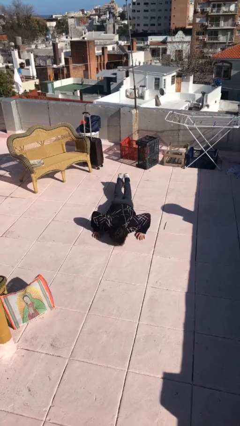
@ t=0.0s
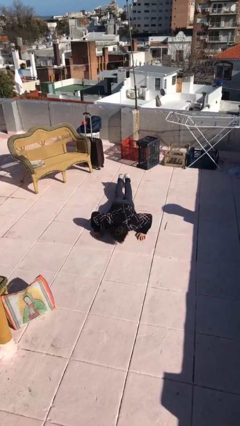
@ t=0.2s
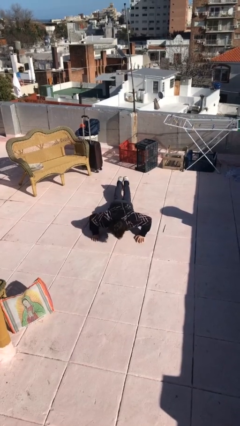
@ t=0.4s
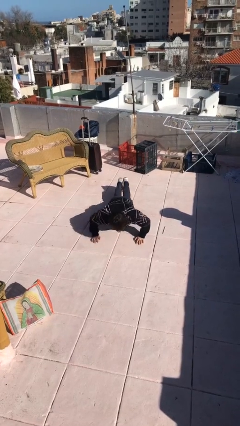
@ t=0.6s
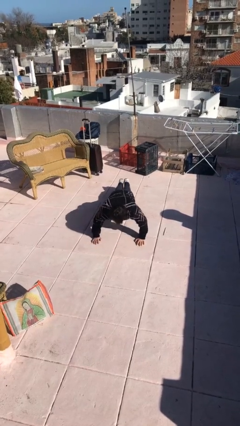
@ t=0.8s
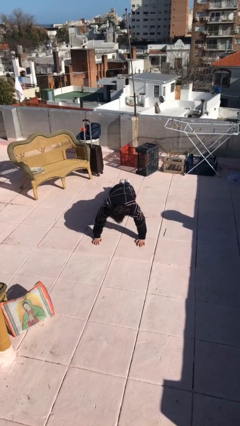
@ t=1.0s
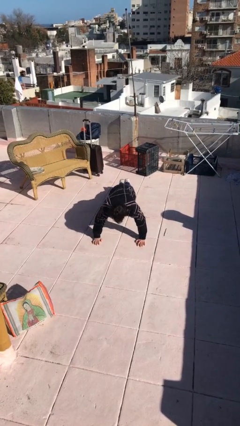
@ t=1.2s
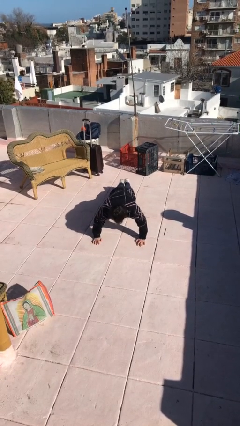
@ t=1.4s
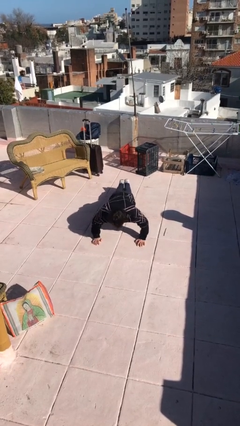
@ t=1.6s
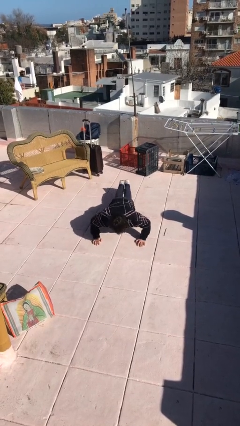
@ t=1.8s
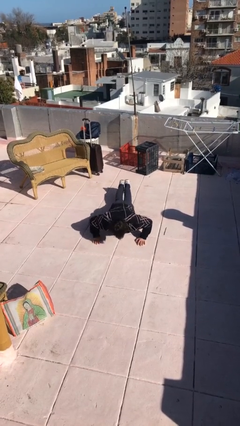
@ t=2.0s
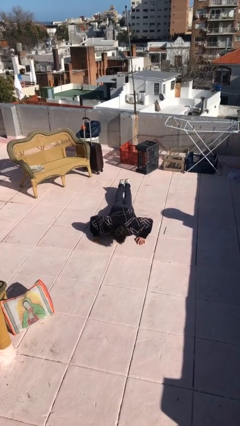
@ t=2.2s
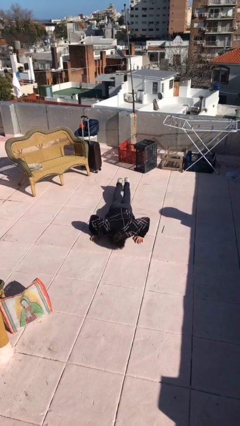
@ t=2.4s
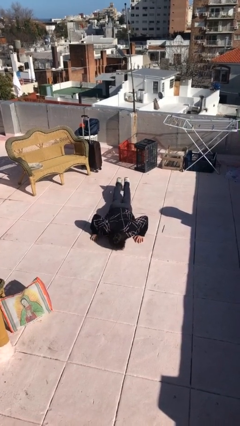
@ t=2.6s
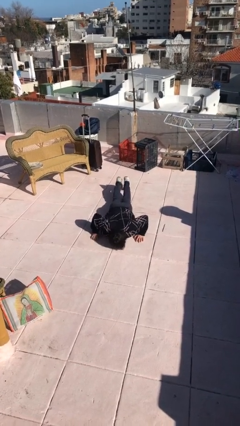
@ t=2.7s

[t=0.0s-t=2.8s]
person exercises with pushup

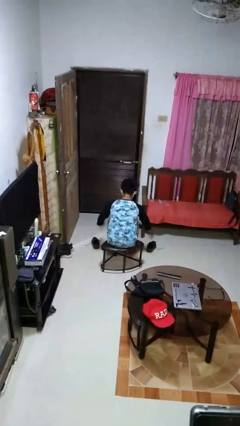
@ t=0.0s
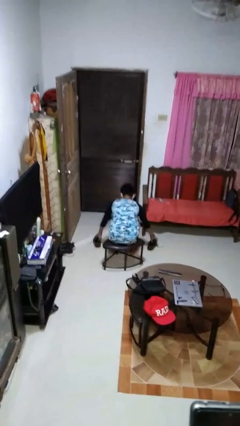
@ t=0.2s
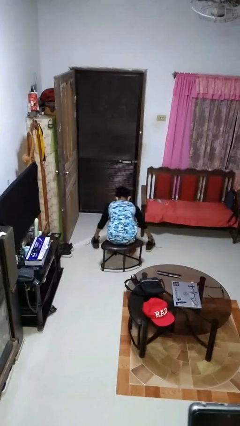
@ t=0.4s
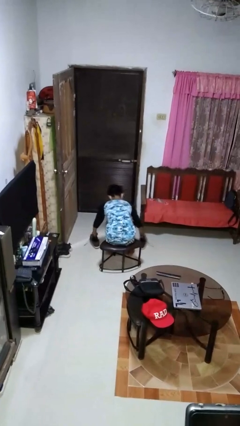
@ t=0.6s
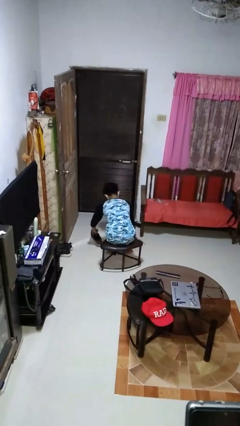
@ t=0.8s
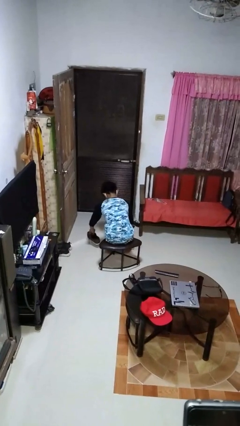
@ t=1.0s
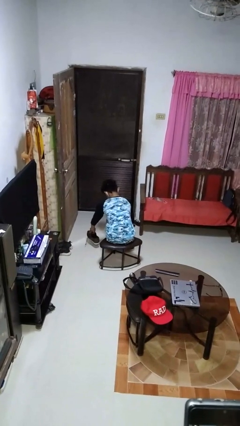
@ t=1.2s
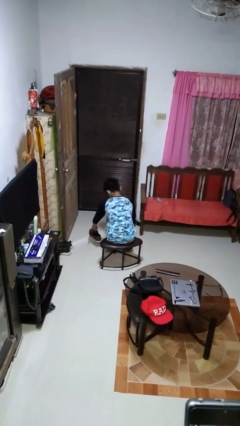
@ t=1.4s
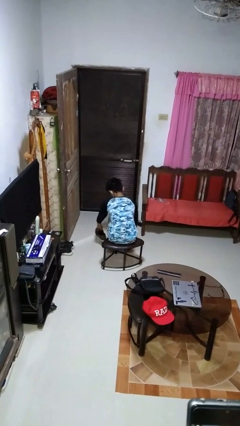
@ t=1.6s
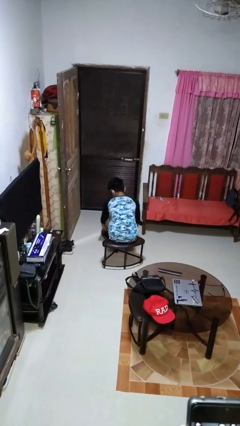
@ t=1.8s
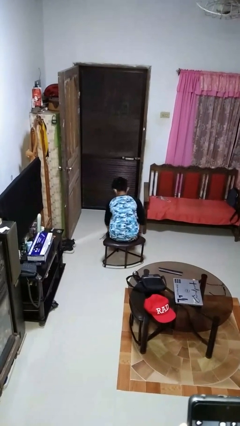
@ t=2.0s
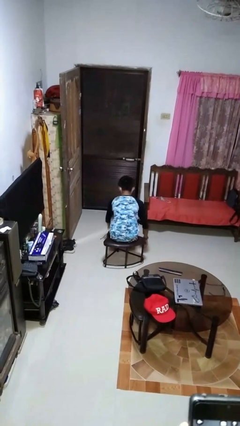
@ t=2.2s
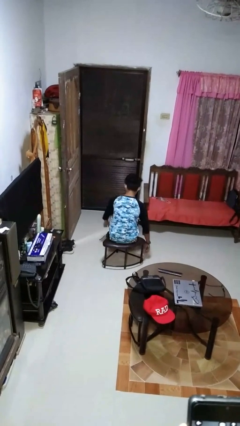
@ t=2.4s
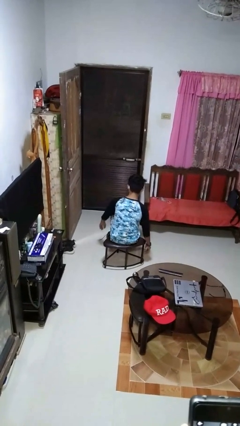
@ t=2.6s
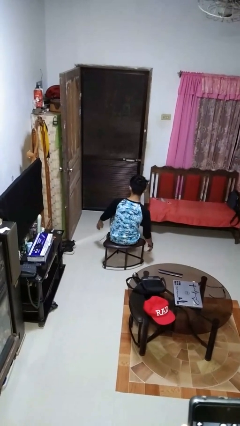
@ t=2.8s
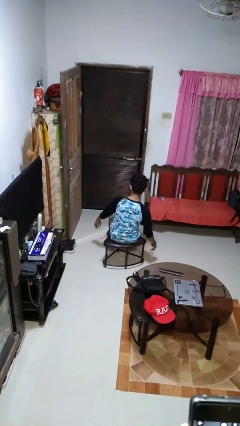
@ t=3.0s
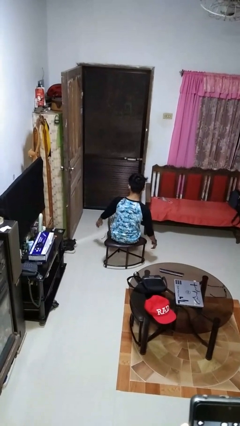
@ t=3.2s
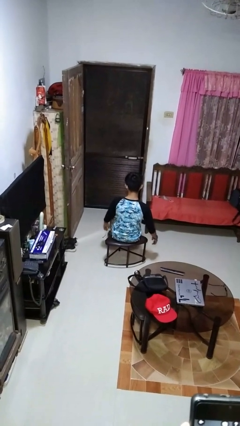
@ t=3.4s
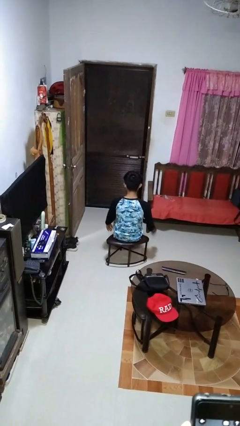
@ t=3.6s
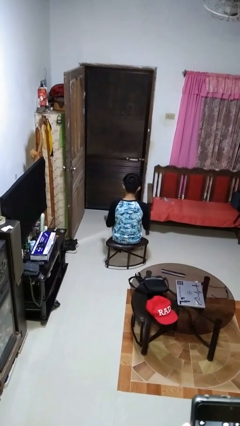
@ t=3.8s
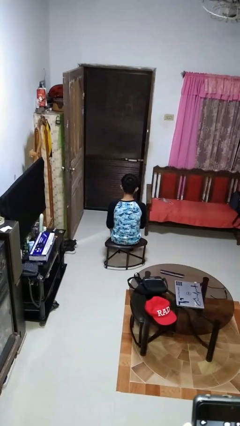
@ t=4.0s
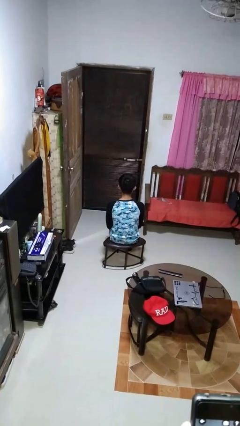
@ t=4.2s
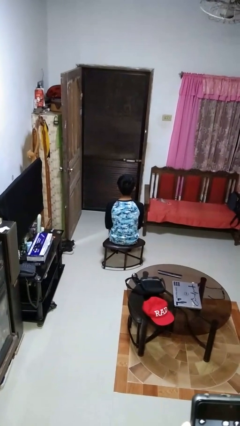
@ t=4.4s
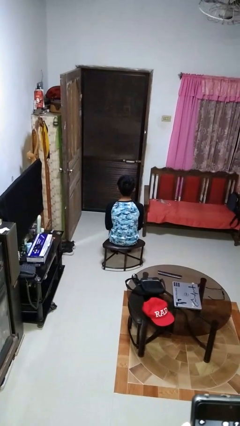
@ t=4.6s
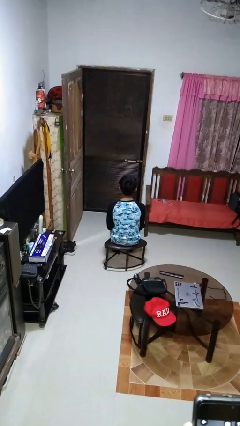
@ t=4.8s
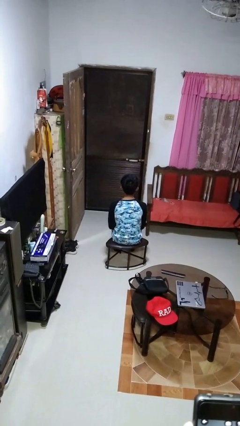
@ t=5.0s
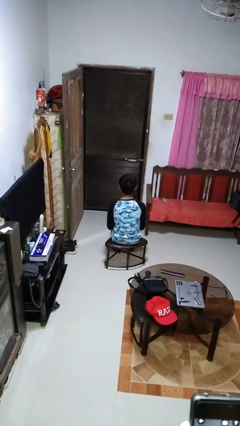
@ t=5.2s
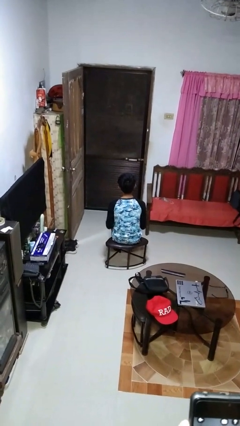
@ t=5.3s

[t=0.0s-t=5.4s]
person puts on shoes

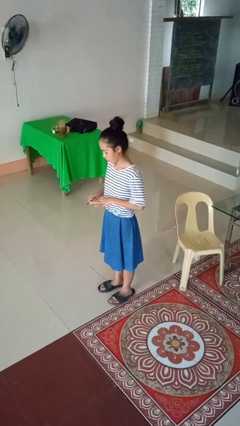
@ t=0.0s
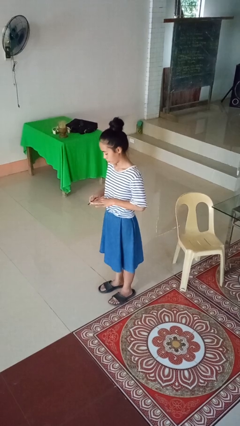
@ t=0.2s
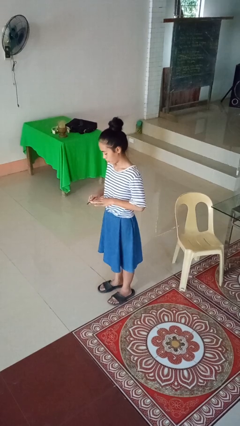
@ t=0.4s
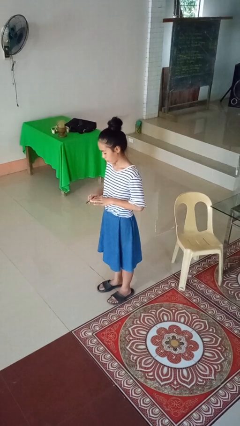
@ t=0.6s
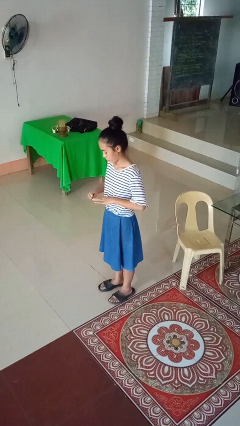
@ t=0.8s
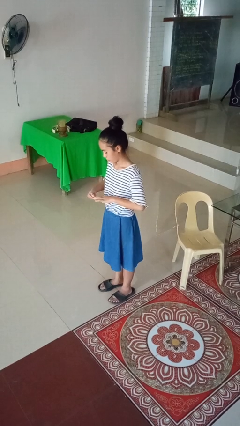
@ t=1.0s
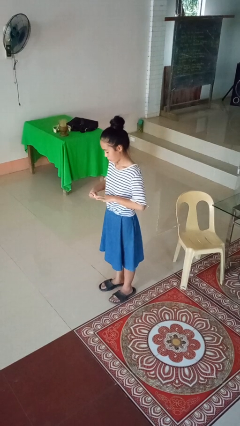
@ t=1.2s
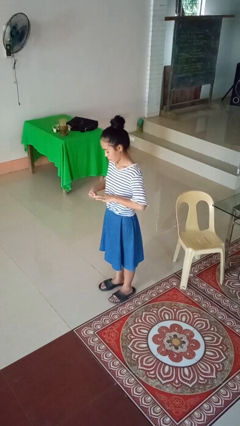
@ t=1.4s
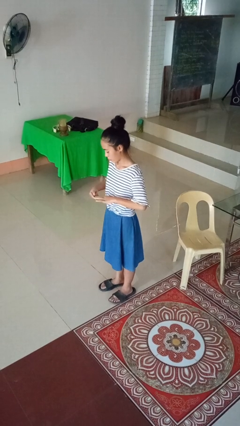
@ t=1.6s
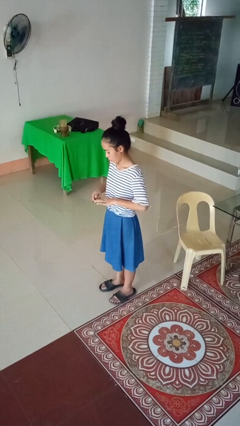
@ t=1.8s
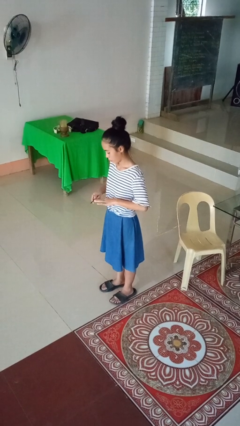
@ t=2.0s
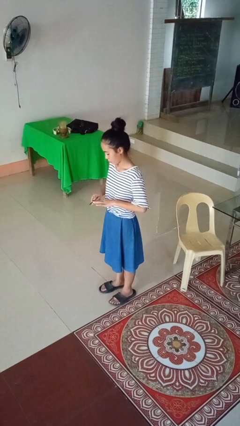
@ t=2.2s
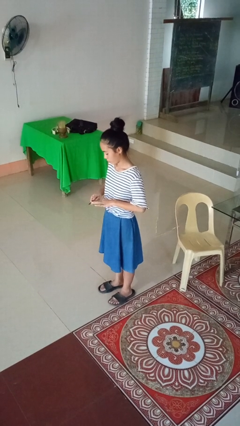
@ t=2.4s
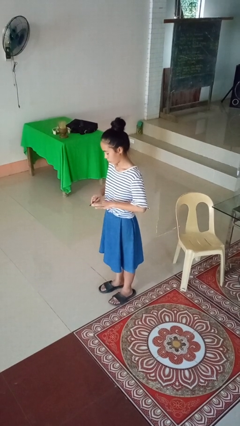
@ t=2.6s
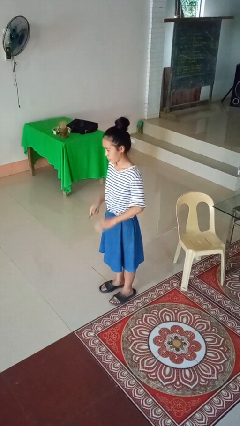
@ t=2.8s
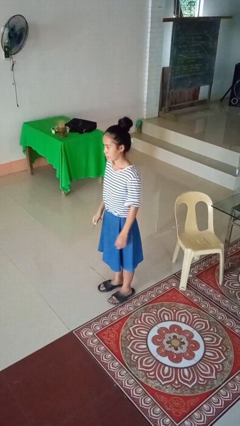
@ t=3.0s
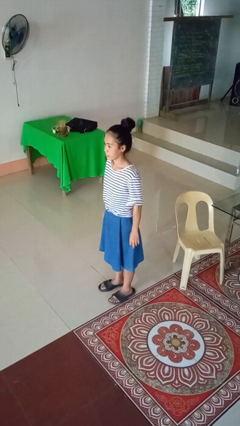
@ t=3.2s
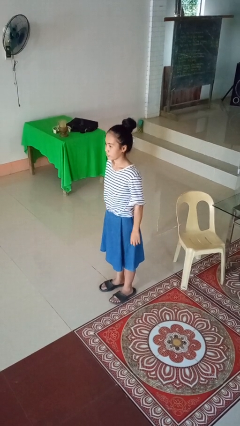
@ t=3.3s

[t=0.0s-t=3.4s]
person files fingernails

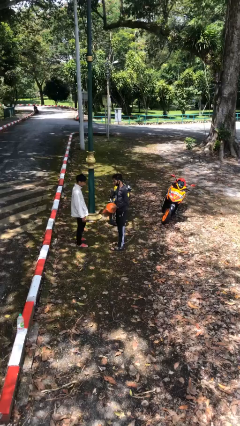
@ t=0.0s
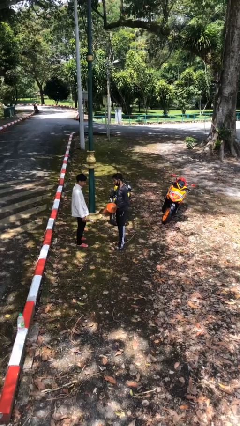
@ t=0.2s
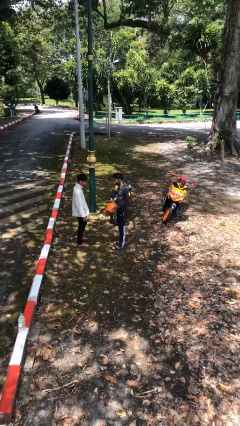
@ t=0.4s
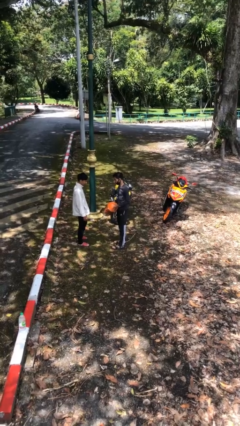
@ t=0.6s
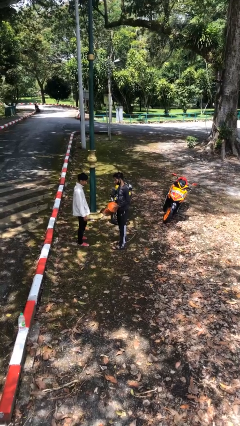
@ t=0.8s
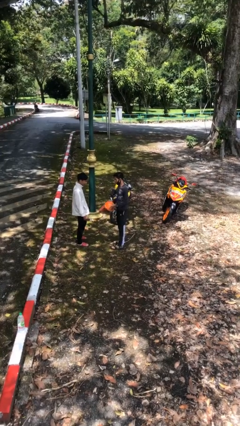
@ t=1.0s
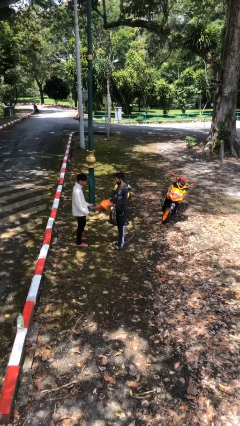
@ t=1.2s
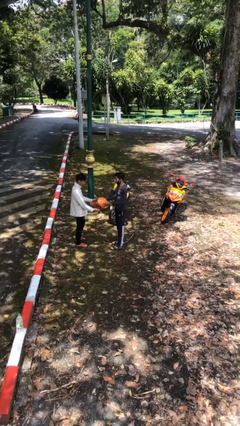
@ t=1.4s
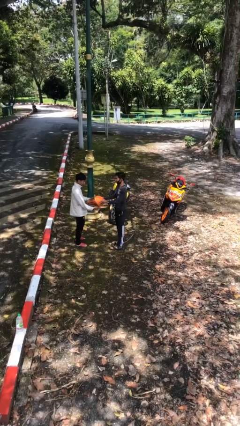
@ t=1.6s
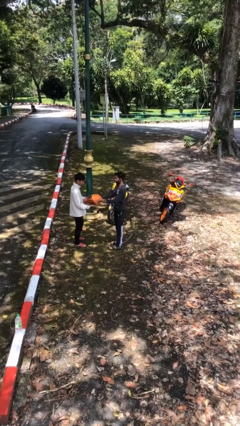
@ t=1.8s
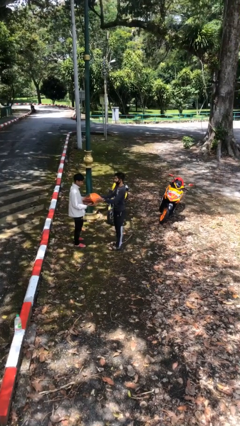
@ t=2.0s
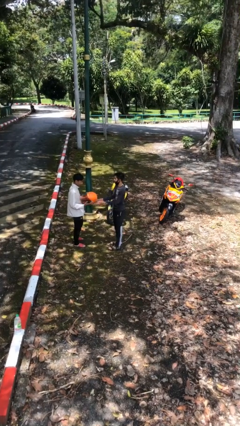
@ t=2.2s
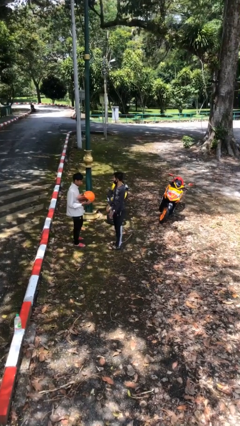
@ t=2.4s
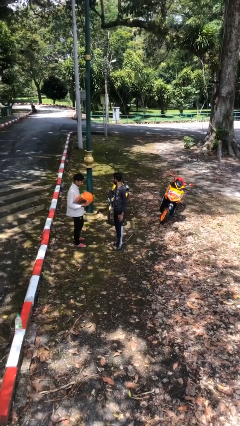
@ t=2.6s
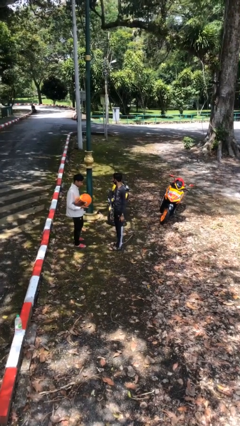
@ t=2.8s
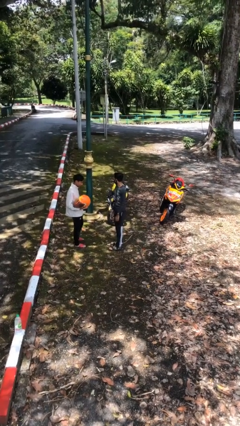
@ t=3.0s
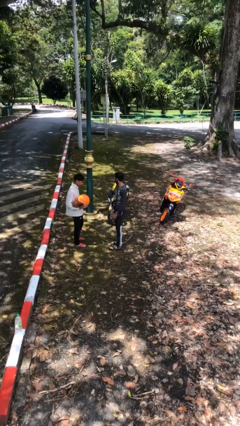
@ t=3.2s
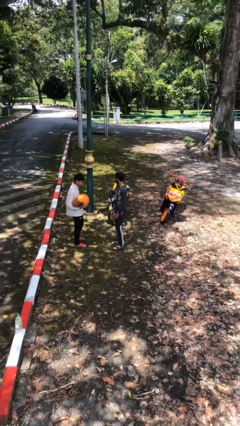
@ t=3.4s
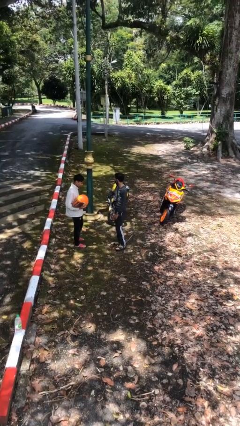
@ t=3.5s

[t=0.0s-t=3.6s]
person transfers object to person

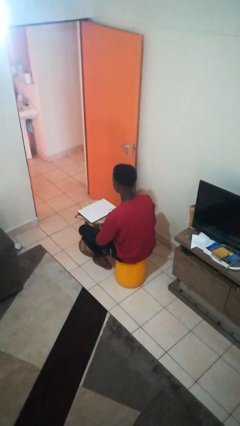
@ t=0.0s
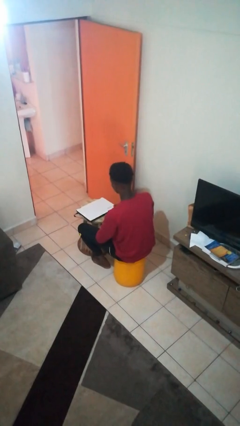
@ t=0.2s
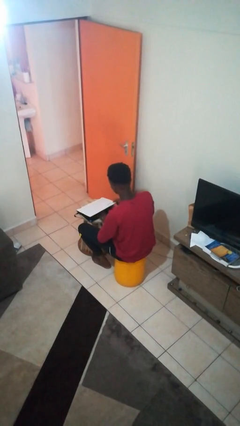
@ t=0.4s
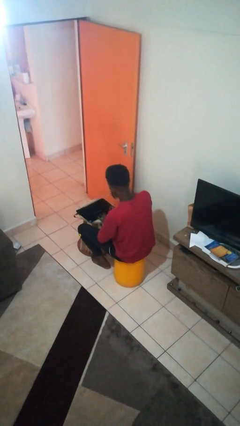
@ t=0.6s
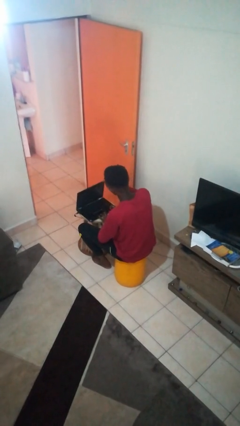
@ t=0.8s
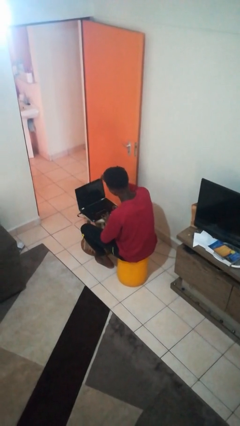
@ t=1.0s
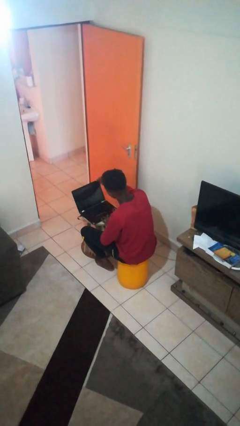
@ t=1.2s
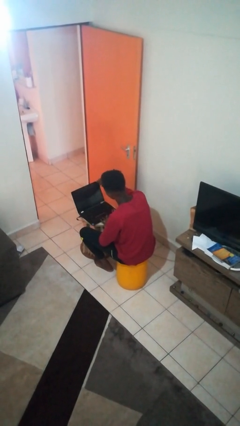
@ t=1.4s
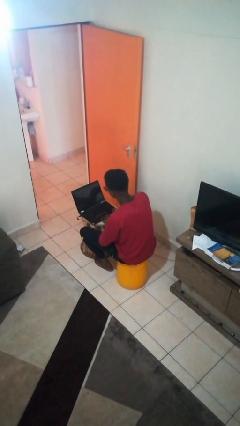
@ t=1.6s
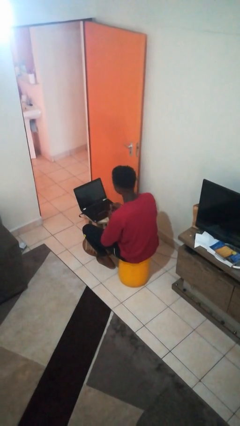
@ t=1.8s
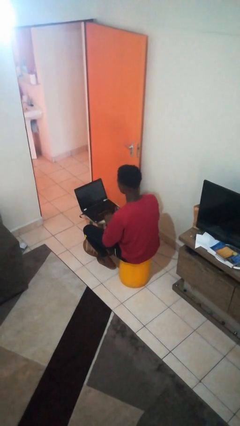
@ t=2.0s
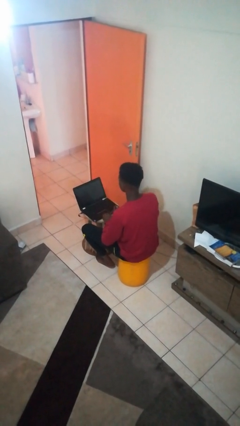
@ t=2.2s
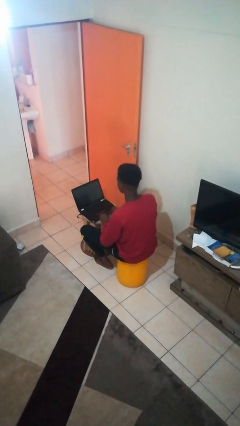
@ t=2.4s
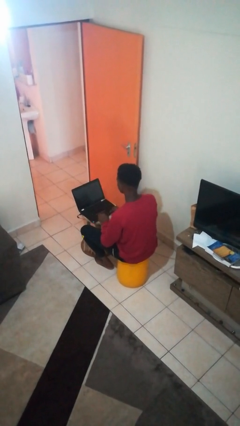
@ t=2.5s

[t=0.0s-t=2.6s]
person opens laptop
